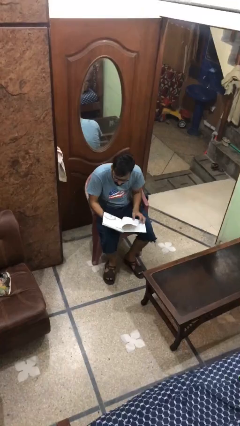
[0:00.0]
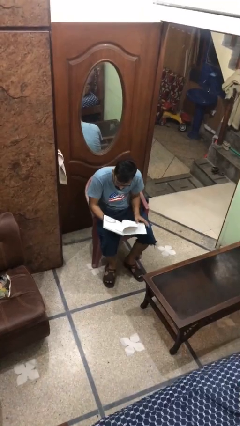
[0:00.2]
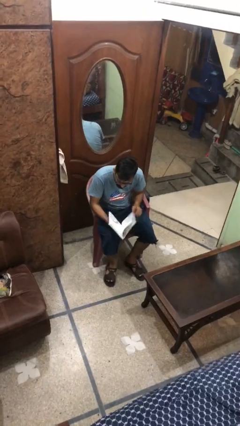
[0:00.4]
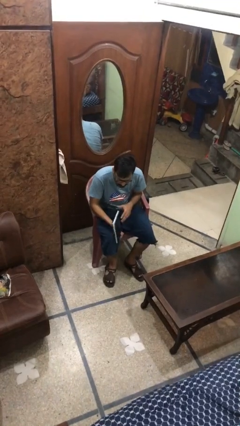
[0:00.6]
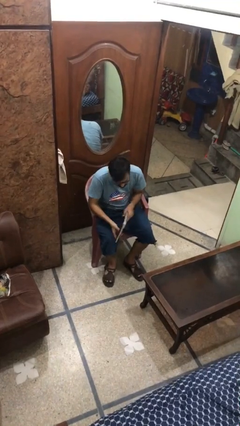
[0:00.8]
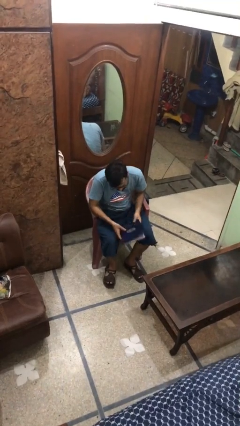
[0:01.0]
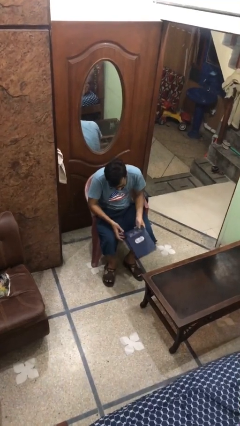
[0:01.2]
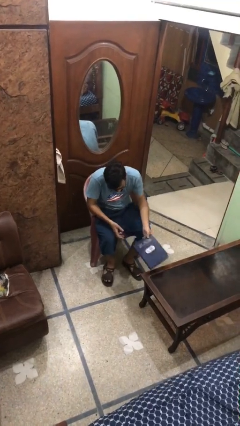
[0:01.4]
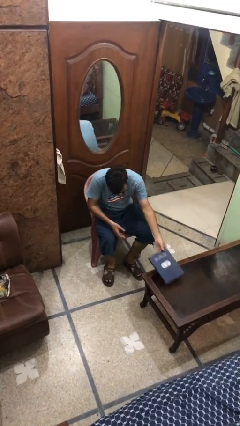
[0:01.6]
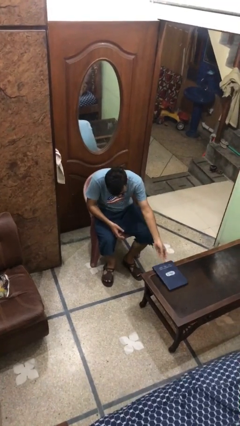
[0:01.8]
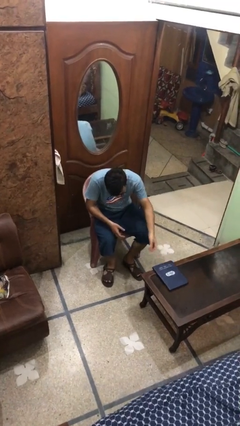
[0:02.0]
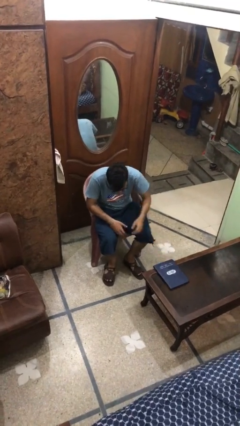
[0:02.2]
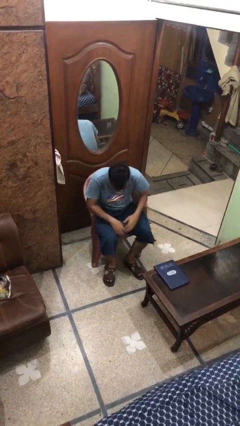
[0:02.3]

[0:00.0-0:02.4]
person puts down object on table

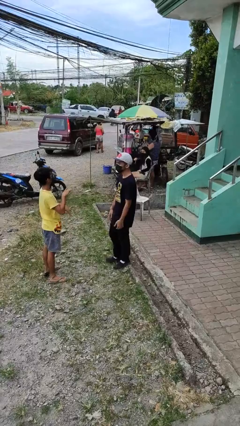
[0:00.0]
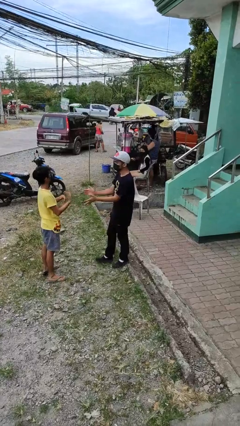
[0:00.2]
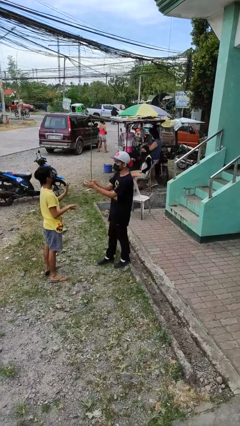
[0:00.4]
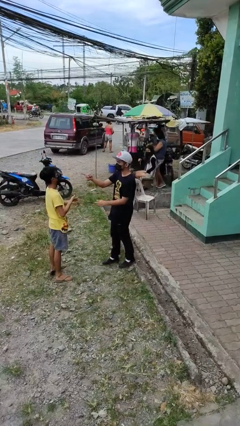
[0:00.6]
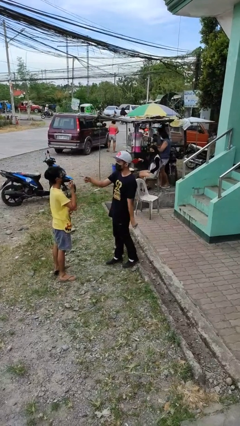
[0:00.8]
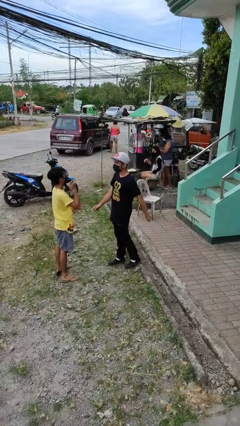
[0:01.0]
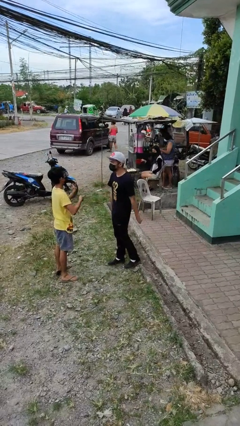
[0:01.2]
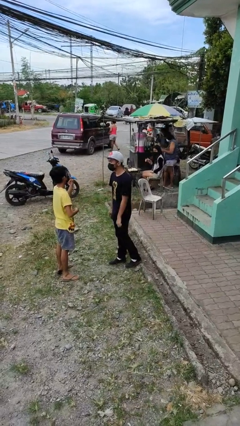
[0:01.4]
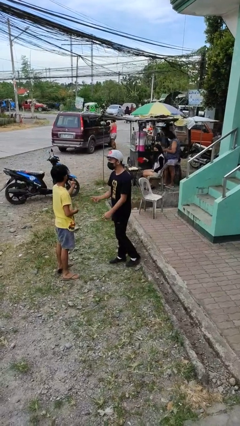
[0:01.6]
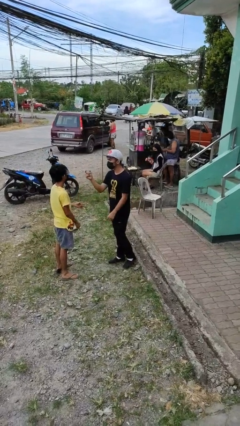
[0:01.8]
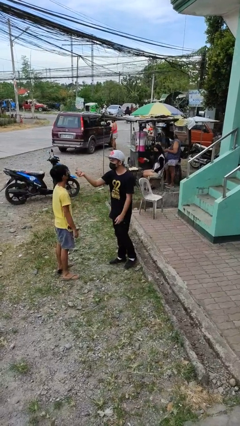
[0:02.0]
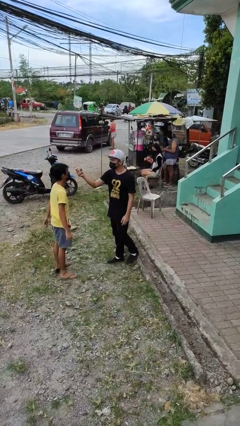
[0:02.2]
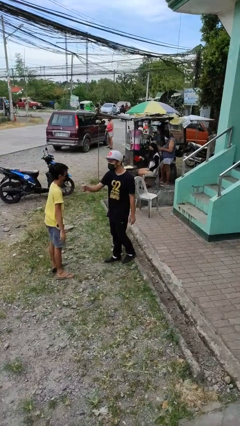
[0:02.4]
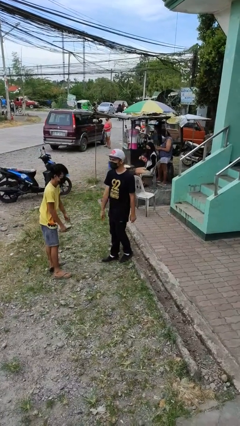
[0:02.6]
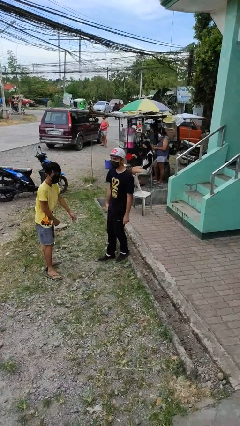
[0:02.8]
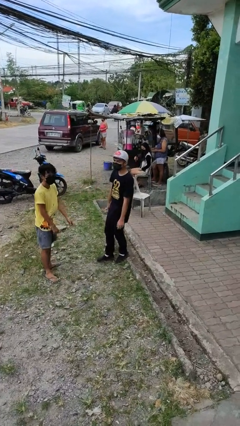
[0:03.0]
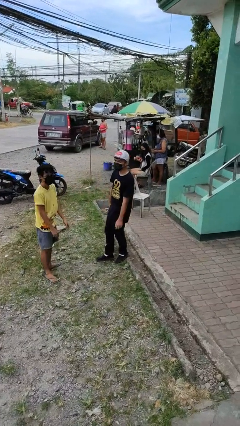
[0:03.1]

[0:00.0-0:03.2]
person talks to person

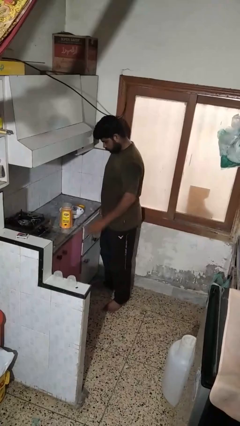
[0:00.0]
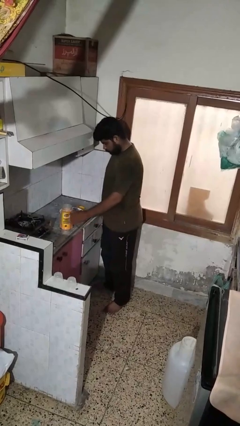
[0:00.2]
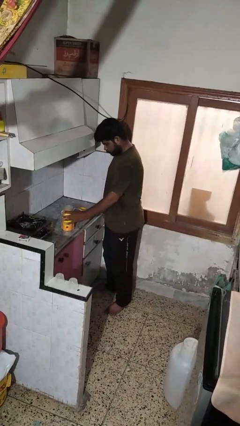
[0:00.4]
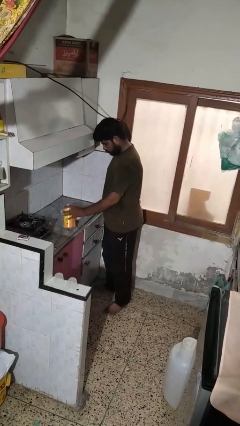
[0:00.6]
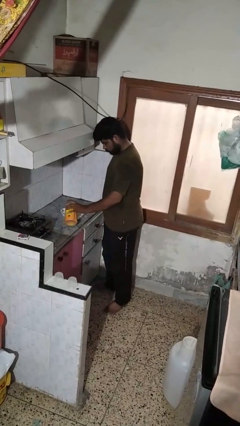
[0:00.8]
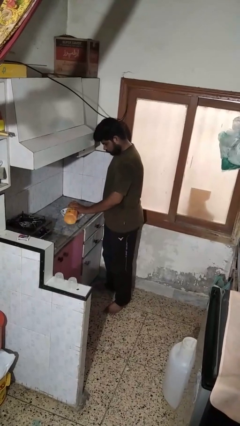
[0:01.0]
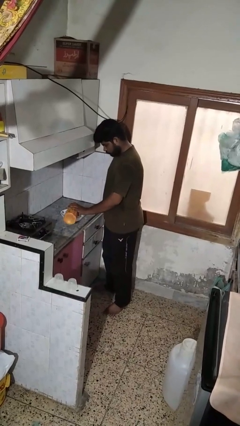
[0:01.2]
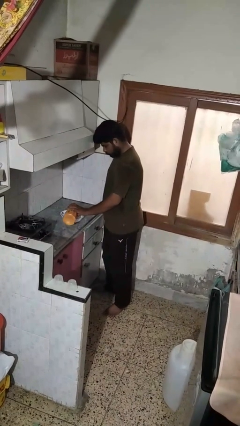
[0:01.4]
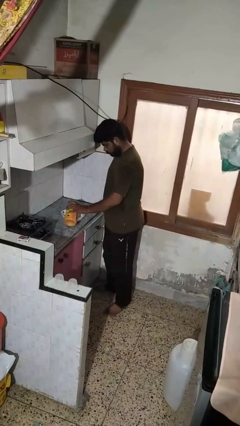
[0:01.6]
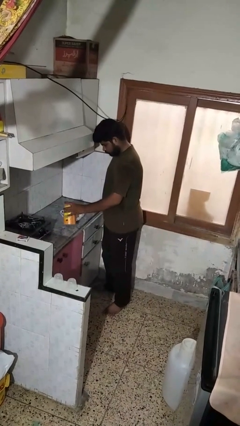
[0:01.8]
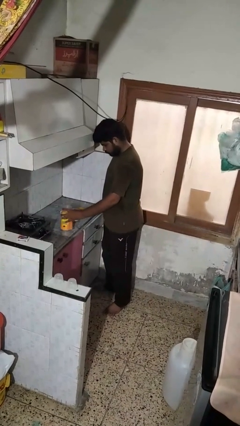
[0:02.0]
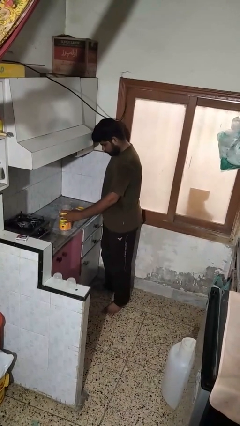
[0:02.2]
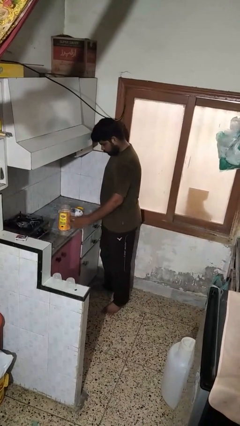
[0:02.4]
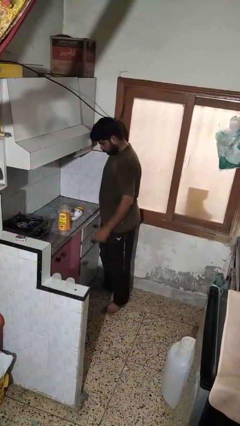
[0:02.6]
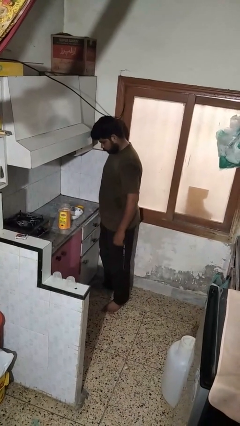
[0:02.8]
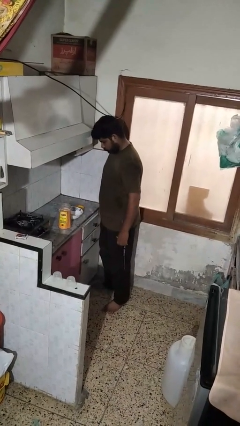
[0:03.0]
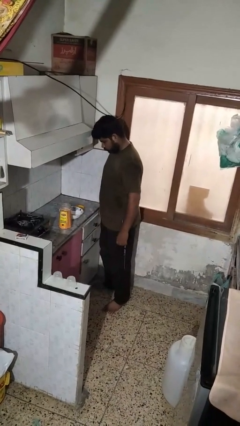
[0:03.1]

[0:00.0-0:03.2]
person pours into bowl

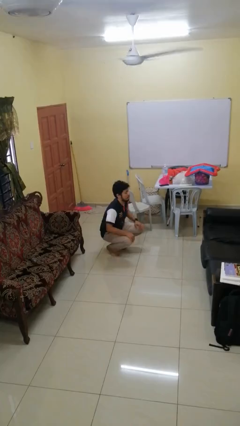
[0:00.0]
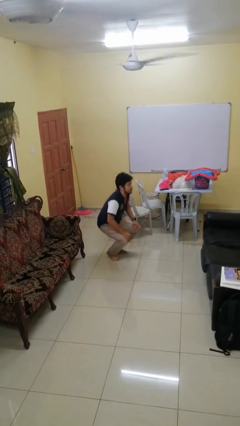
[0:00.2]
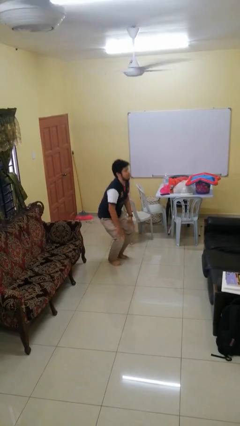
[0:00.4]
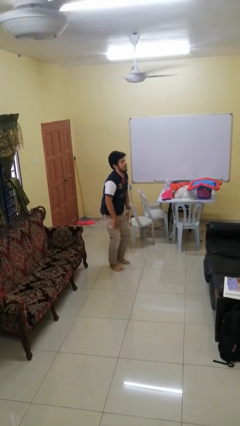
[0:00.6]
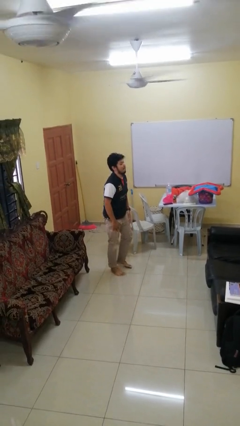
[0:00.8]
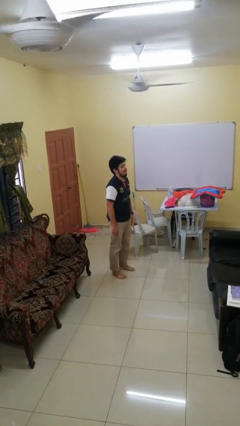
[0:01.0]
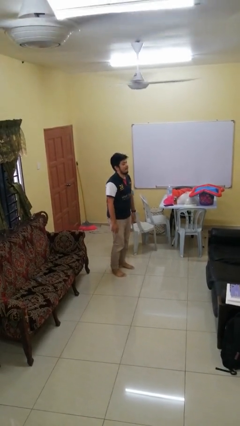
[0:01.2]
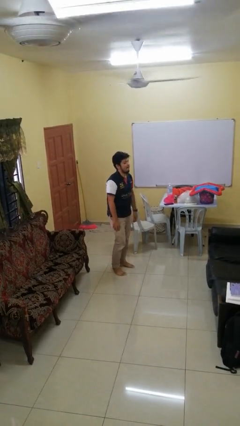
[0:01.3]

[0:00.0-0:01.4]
person stands up

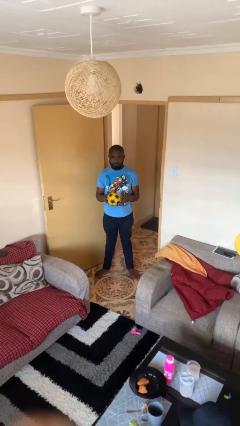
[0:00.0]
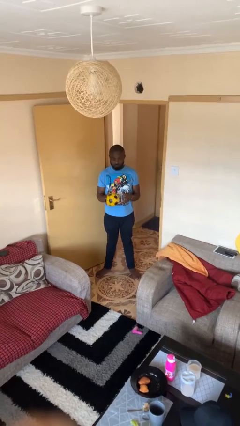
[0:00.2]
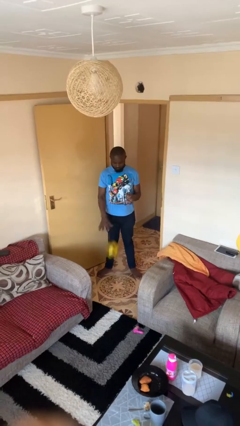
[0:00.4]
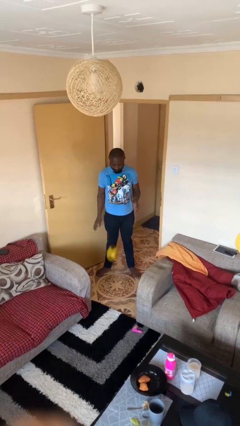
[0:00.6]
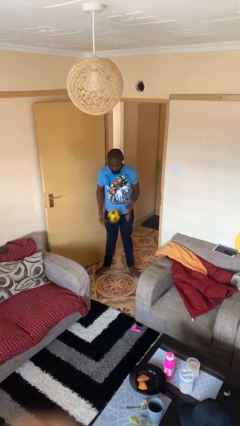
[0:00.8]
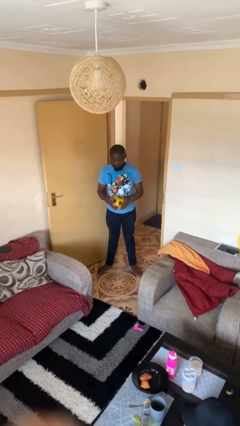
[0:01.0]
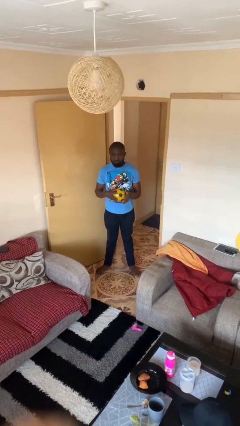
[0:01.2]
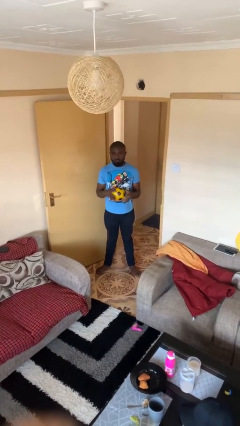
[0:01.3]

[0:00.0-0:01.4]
person bounces ball on floor

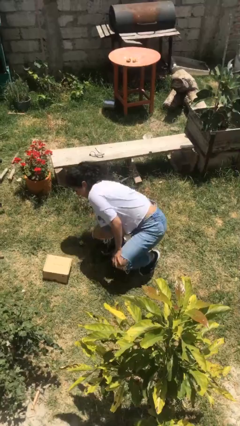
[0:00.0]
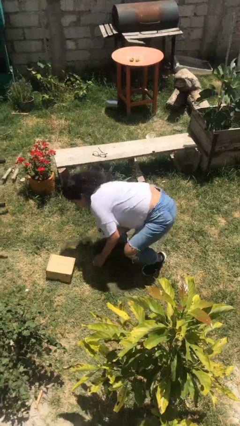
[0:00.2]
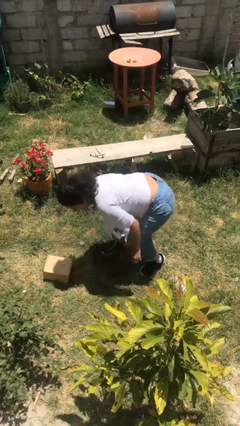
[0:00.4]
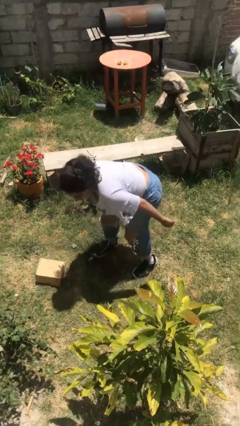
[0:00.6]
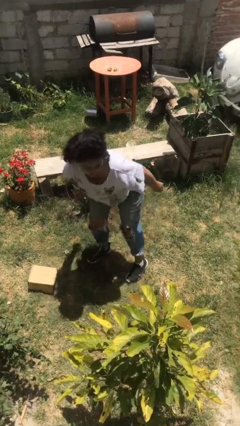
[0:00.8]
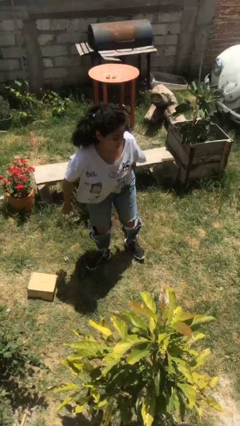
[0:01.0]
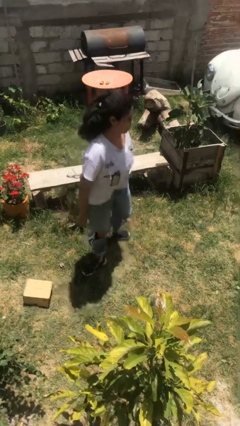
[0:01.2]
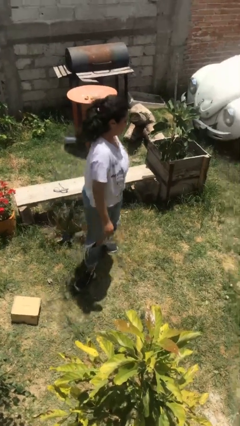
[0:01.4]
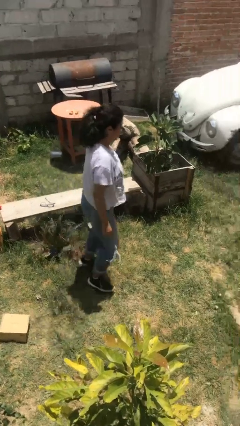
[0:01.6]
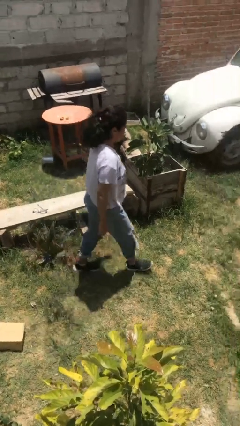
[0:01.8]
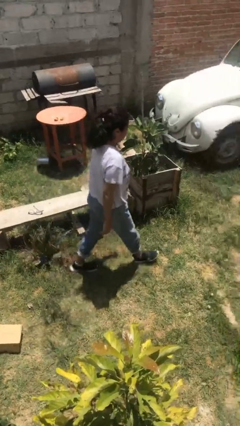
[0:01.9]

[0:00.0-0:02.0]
person stands up from floor

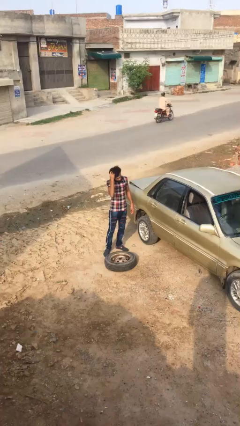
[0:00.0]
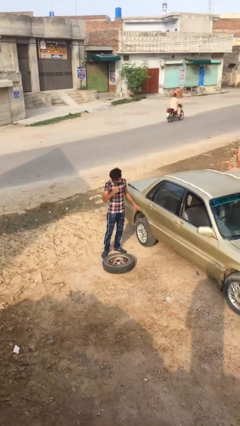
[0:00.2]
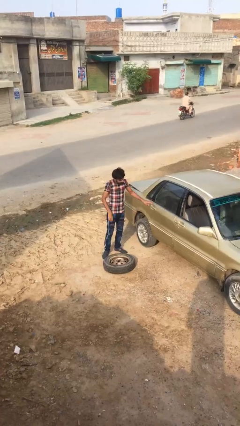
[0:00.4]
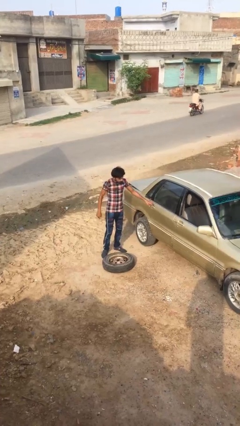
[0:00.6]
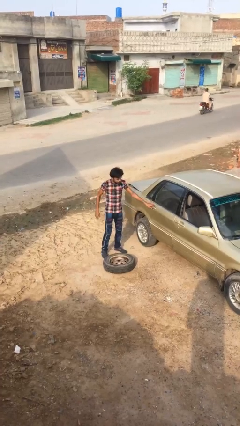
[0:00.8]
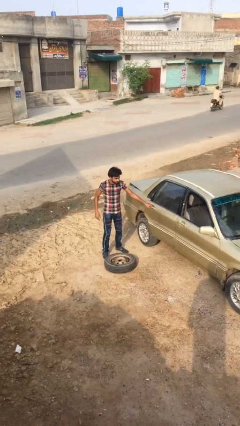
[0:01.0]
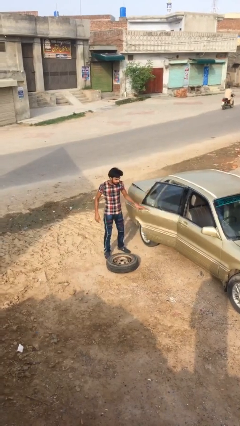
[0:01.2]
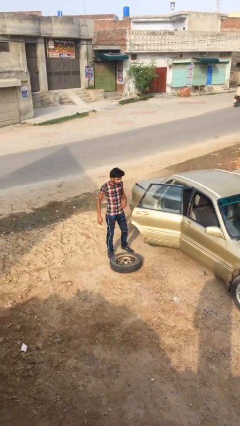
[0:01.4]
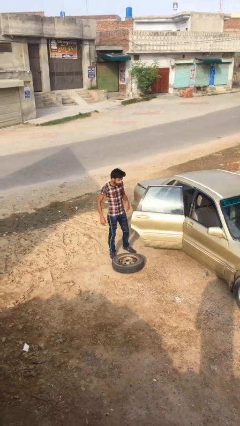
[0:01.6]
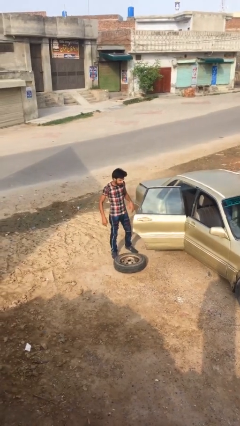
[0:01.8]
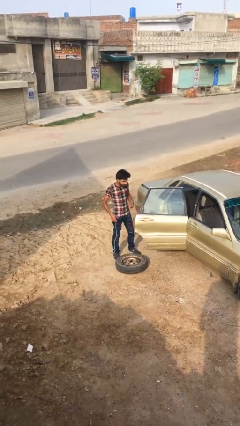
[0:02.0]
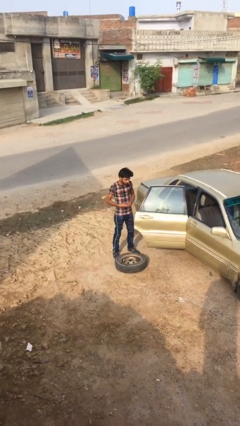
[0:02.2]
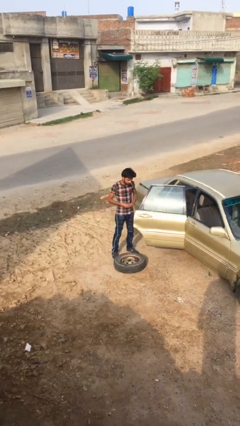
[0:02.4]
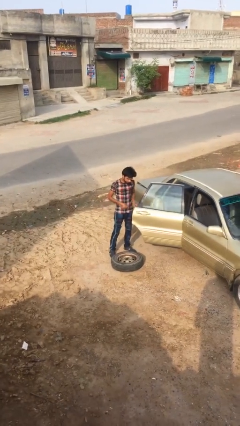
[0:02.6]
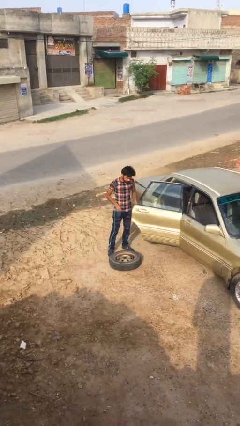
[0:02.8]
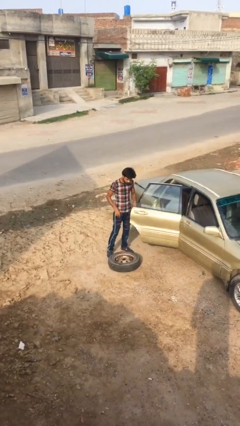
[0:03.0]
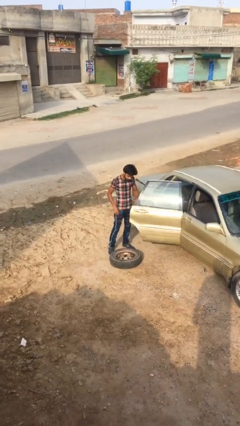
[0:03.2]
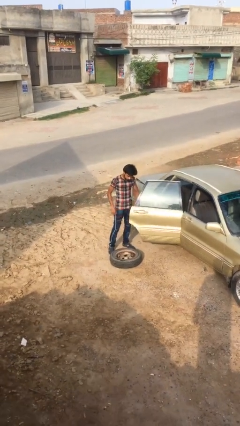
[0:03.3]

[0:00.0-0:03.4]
person opens car door
